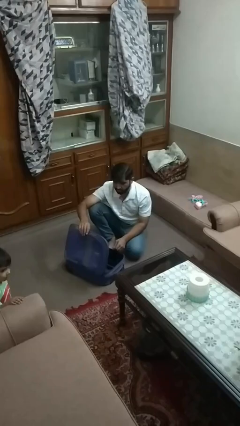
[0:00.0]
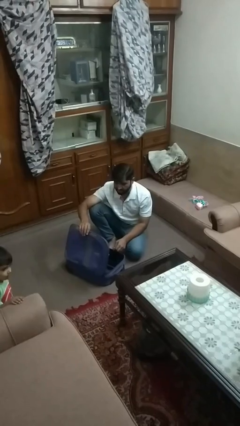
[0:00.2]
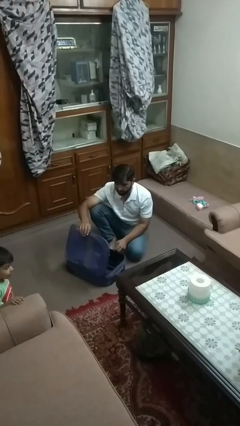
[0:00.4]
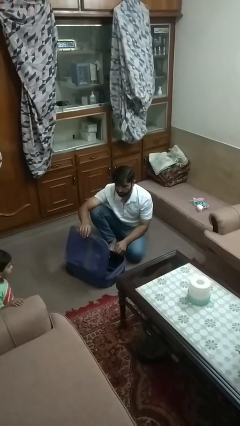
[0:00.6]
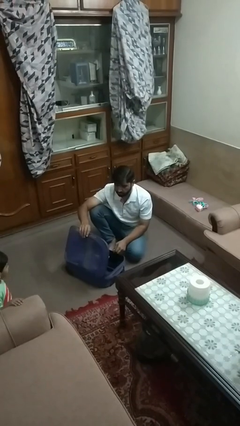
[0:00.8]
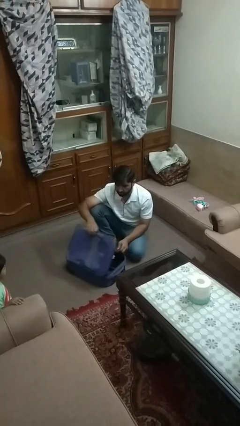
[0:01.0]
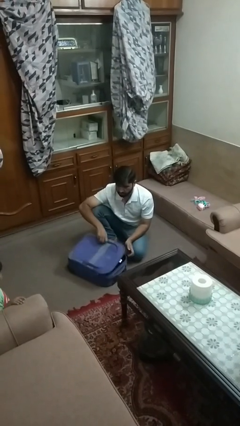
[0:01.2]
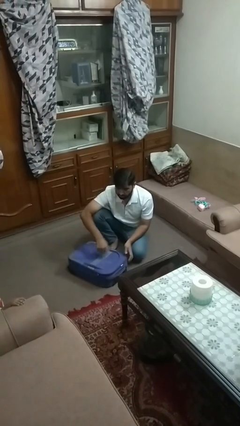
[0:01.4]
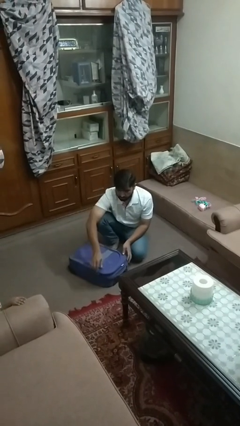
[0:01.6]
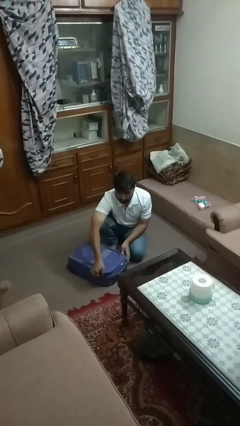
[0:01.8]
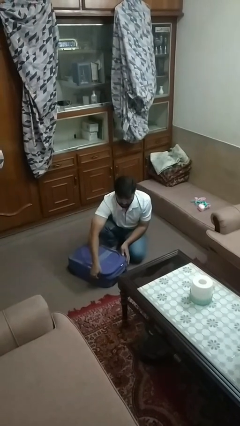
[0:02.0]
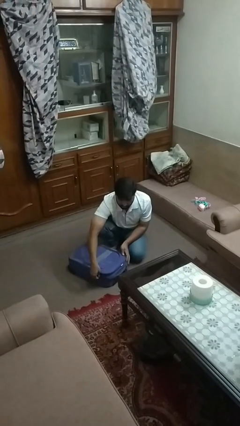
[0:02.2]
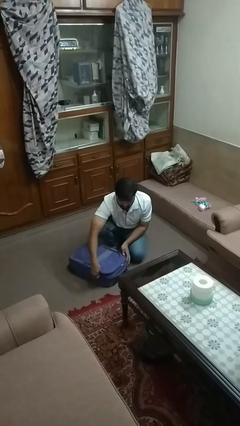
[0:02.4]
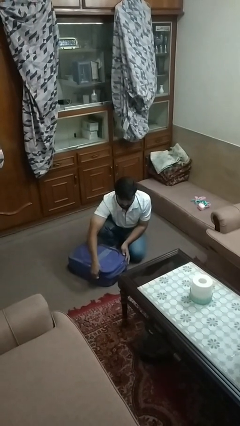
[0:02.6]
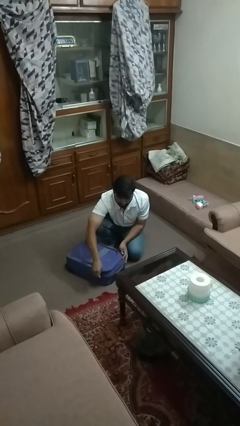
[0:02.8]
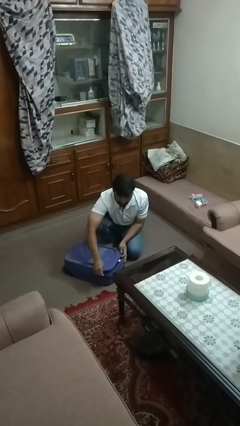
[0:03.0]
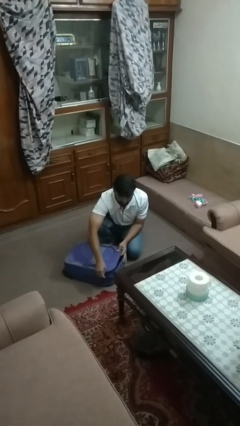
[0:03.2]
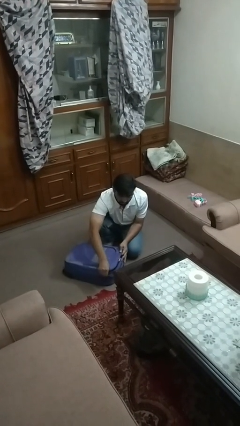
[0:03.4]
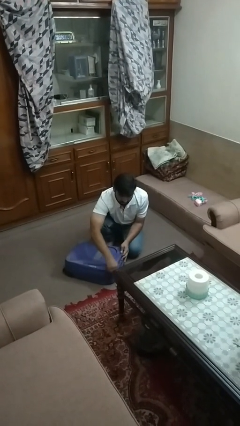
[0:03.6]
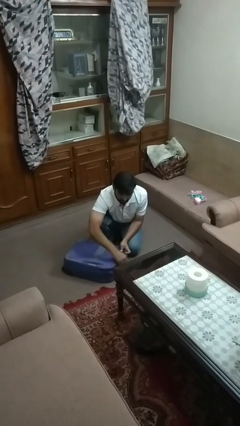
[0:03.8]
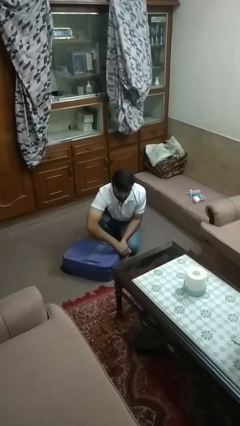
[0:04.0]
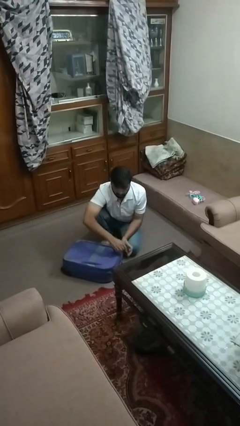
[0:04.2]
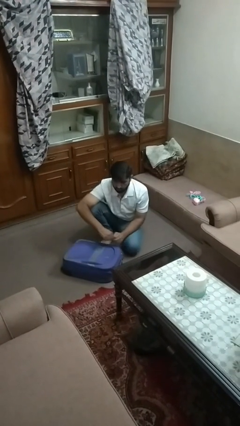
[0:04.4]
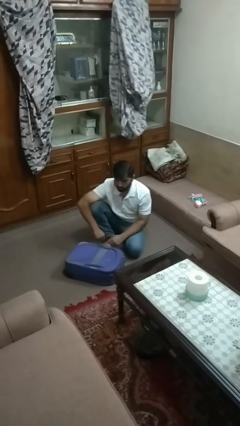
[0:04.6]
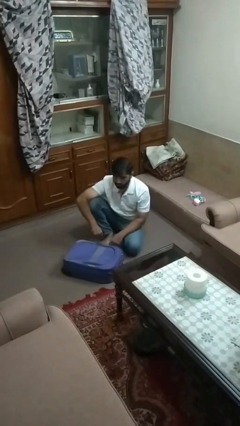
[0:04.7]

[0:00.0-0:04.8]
person closes suitcase

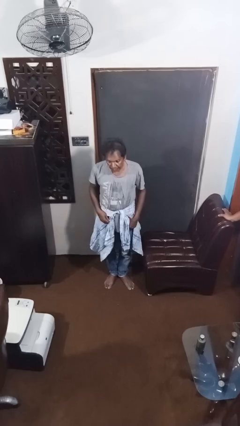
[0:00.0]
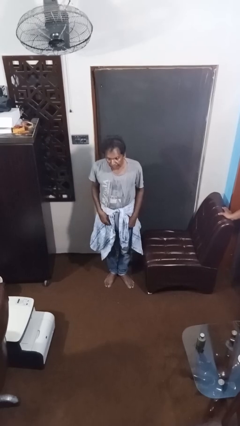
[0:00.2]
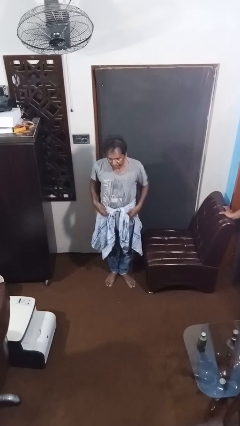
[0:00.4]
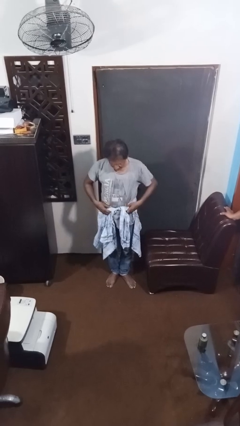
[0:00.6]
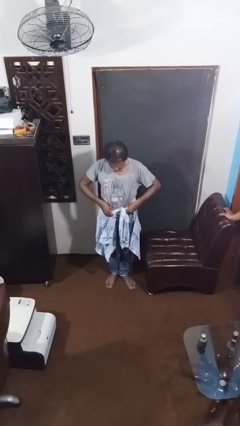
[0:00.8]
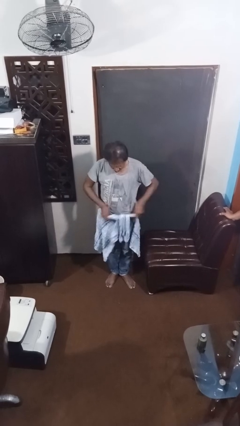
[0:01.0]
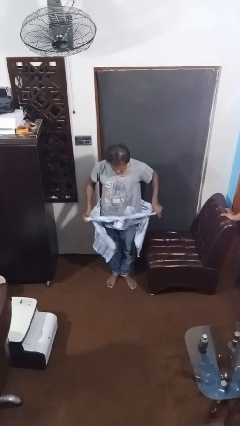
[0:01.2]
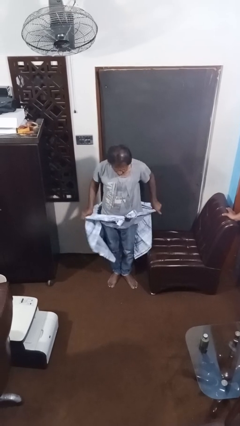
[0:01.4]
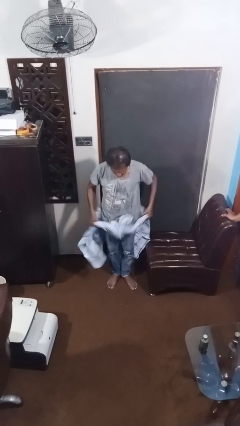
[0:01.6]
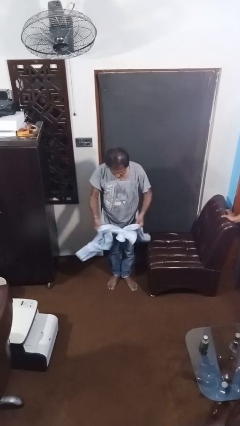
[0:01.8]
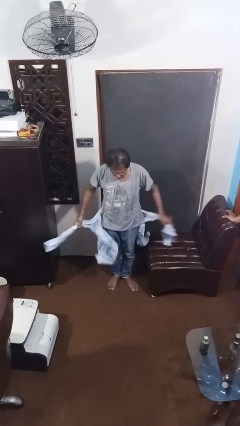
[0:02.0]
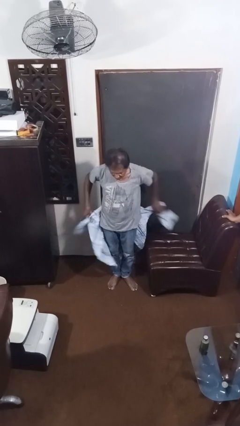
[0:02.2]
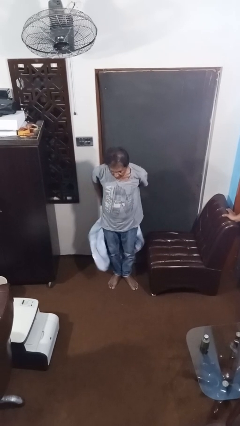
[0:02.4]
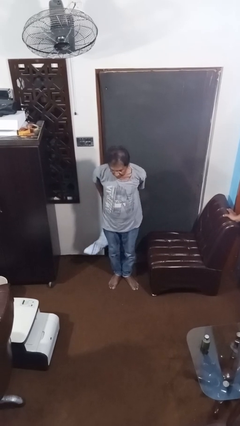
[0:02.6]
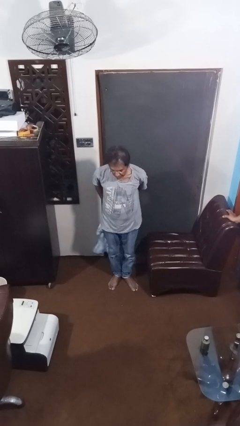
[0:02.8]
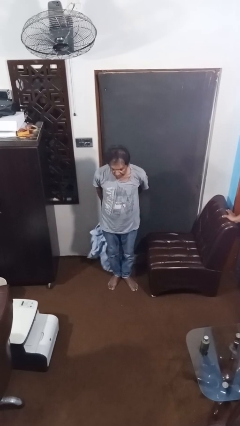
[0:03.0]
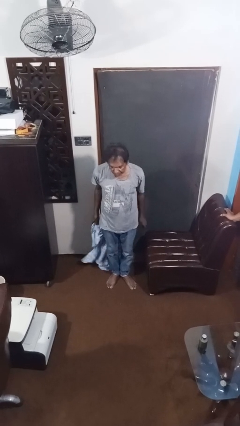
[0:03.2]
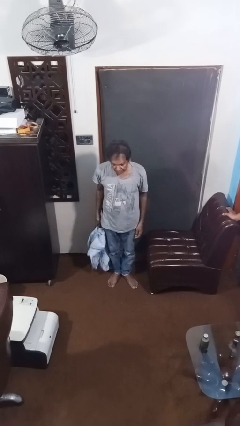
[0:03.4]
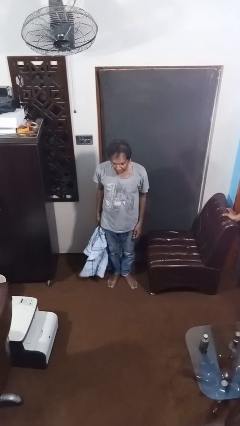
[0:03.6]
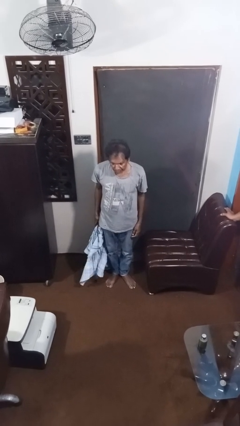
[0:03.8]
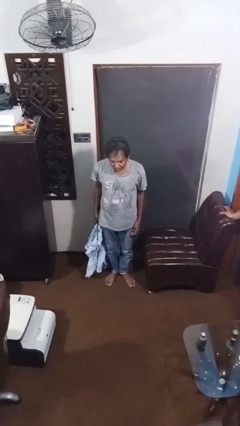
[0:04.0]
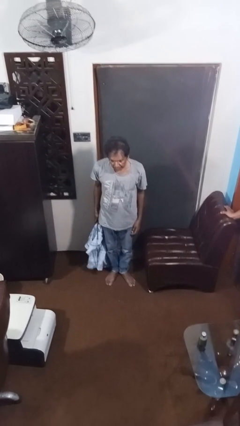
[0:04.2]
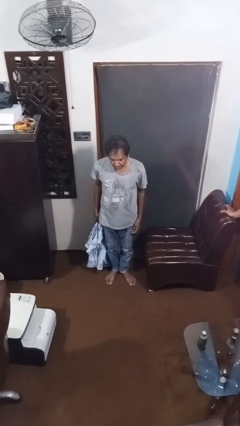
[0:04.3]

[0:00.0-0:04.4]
person unties jacket around waist

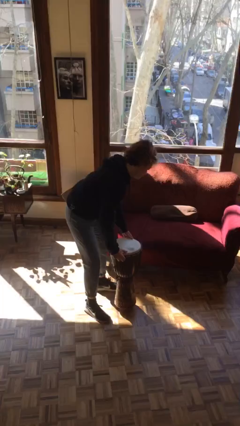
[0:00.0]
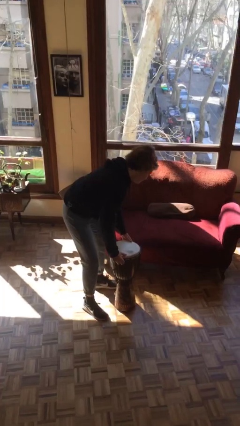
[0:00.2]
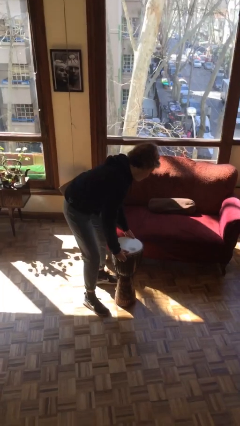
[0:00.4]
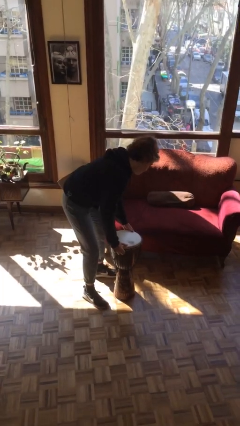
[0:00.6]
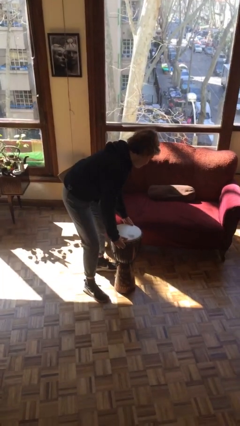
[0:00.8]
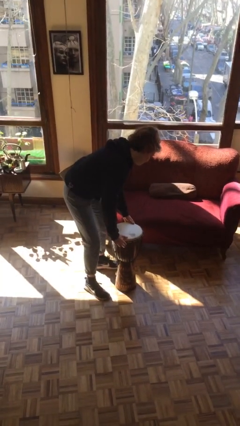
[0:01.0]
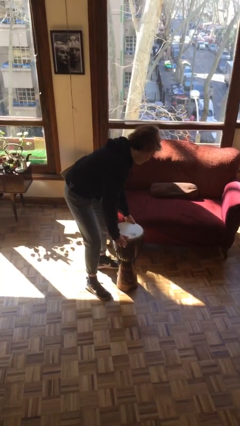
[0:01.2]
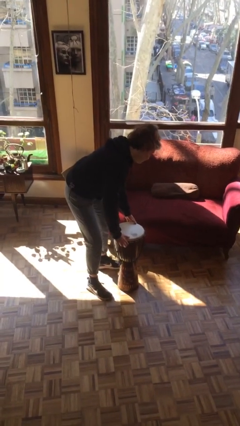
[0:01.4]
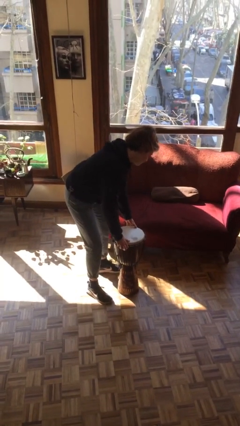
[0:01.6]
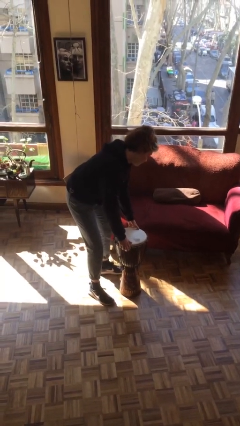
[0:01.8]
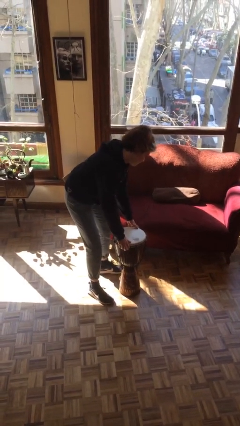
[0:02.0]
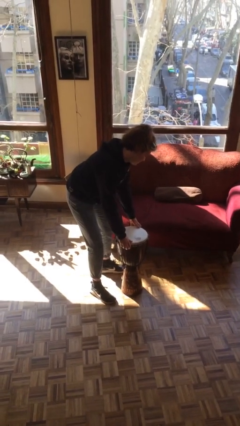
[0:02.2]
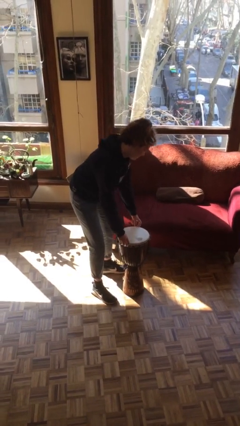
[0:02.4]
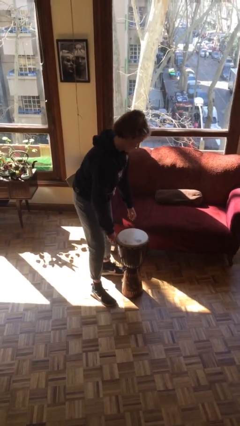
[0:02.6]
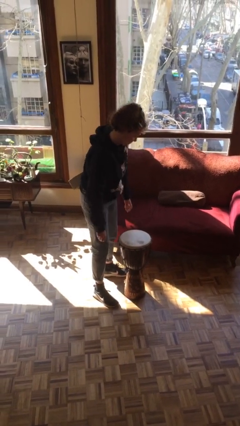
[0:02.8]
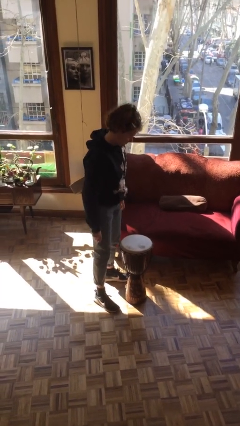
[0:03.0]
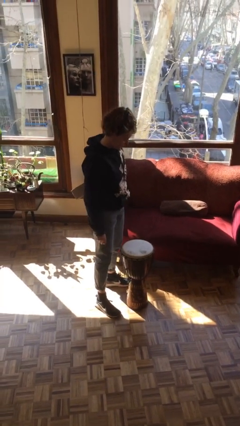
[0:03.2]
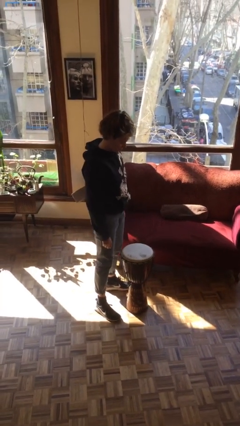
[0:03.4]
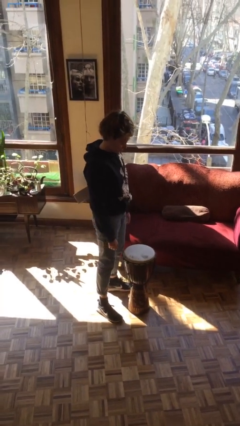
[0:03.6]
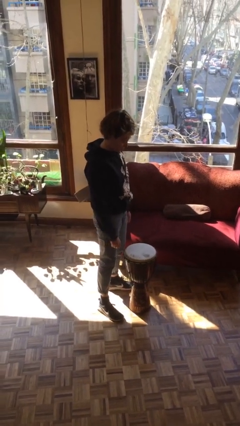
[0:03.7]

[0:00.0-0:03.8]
person puts down object on floor

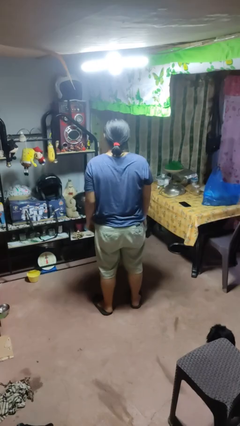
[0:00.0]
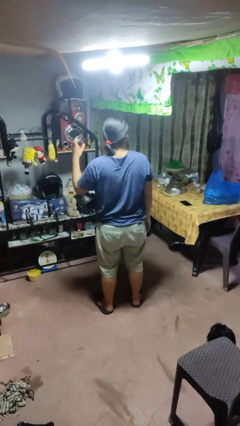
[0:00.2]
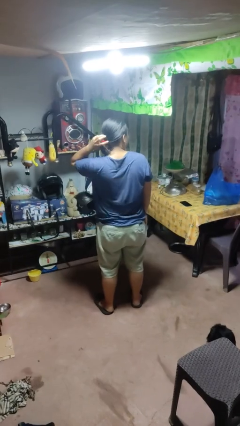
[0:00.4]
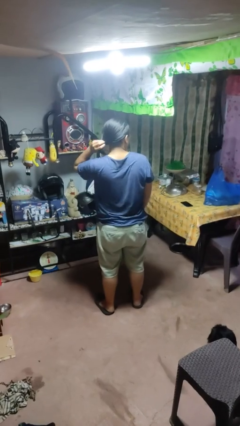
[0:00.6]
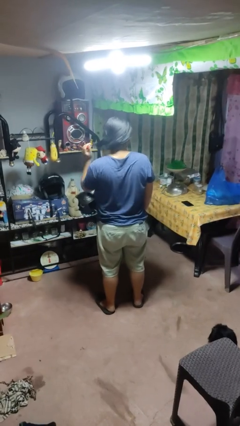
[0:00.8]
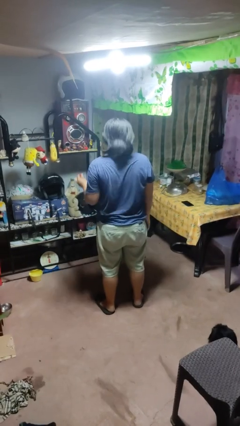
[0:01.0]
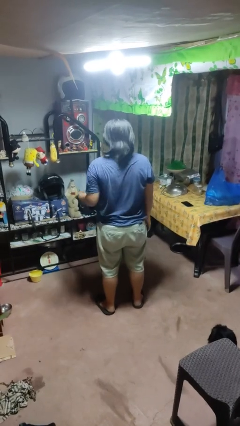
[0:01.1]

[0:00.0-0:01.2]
person takes off hairtie

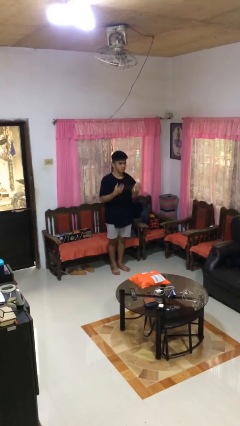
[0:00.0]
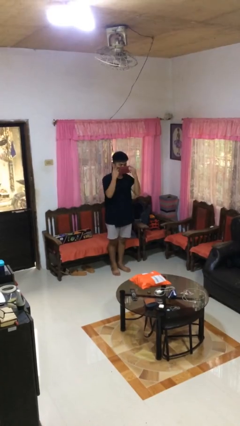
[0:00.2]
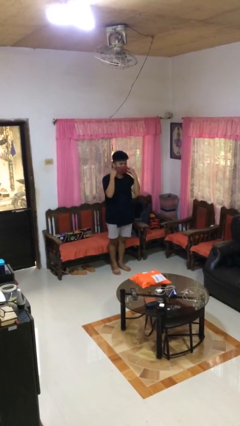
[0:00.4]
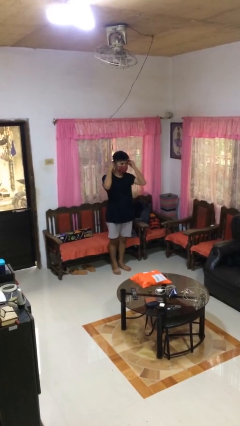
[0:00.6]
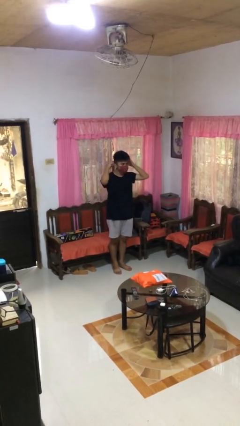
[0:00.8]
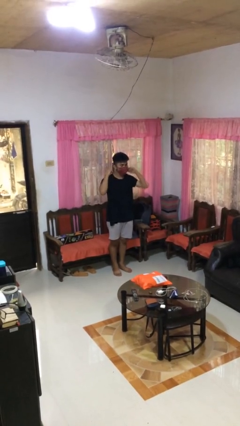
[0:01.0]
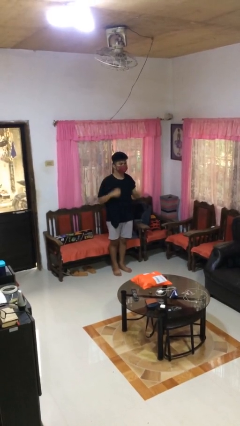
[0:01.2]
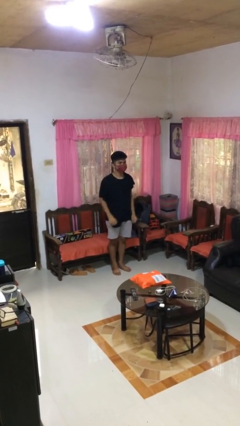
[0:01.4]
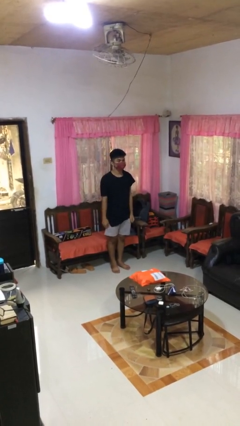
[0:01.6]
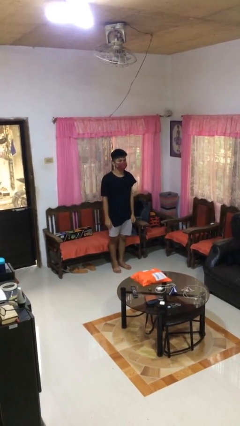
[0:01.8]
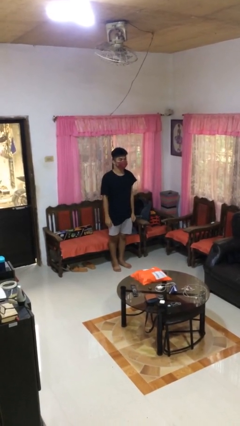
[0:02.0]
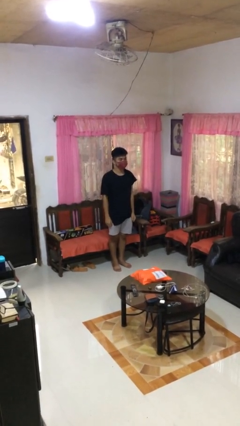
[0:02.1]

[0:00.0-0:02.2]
person puts on facemask

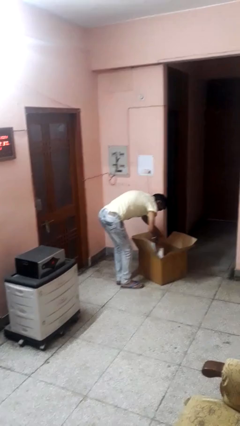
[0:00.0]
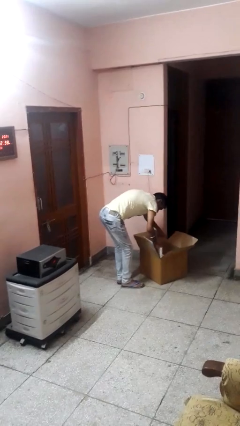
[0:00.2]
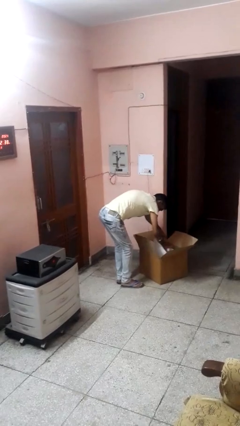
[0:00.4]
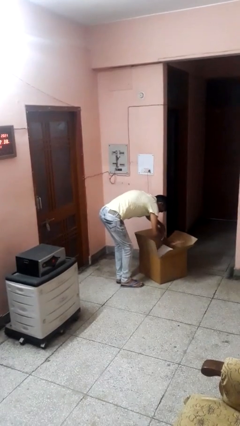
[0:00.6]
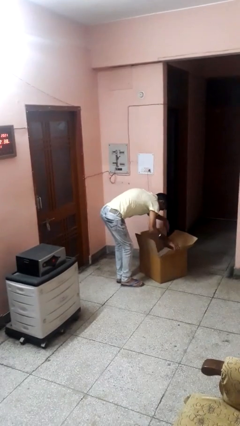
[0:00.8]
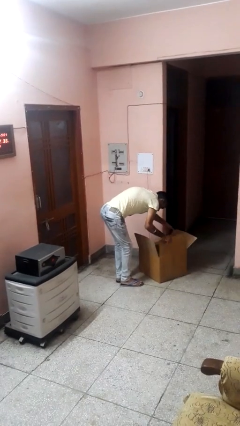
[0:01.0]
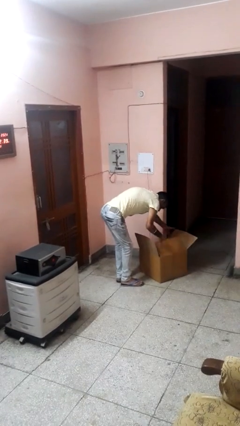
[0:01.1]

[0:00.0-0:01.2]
person searches in box
